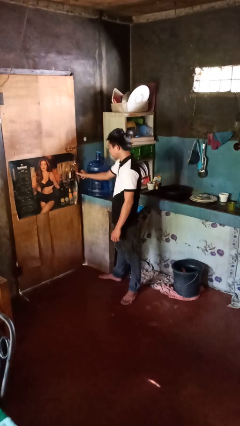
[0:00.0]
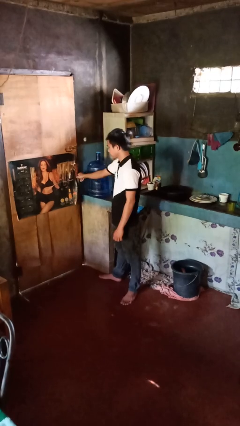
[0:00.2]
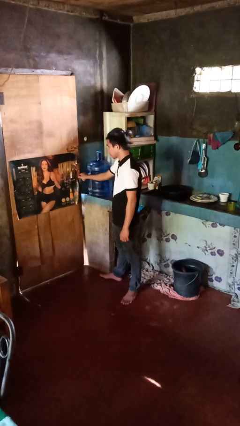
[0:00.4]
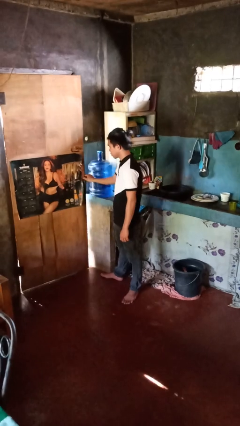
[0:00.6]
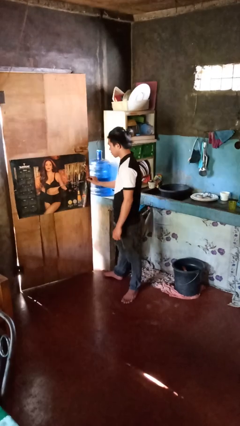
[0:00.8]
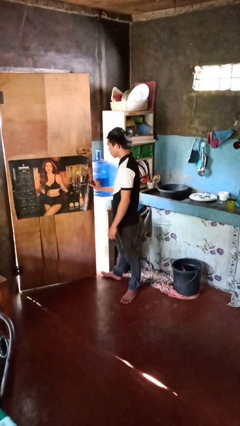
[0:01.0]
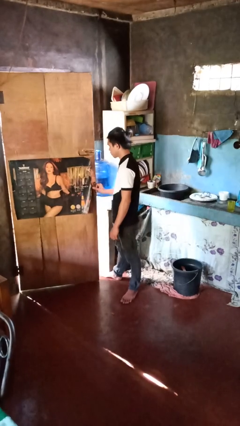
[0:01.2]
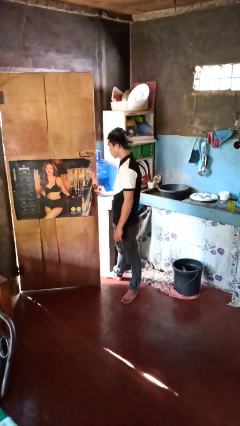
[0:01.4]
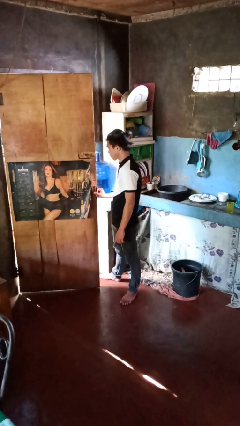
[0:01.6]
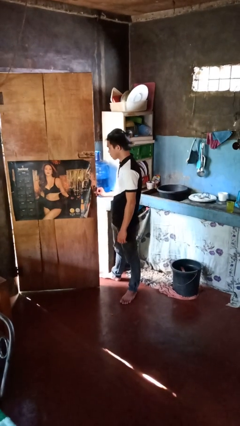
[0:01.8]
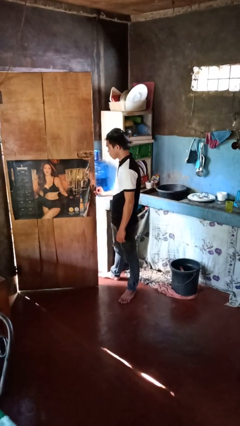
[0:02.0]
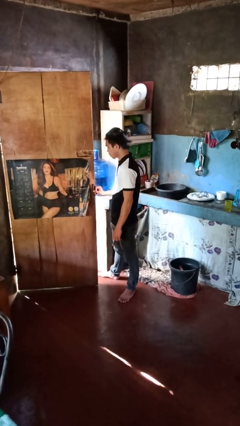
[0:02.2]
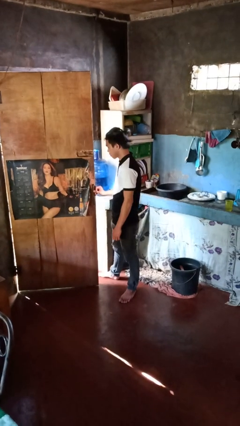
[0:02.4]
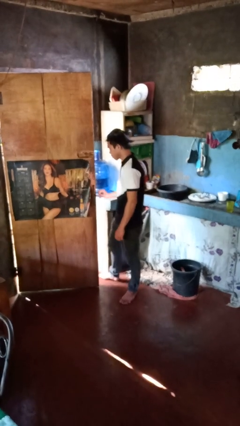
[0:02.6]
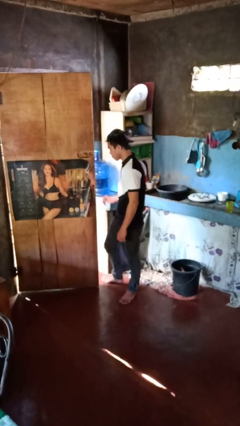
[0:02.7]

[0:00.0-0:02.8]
person opens facility door

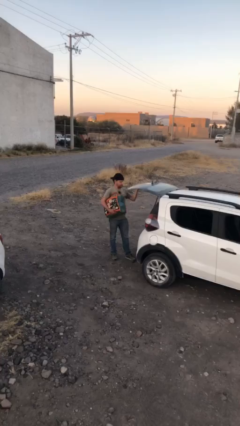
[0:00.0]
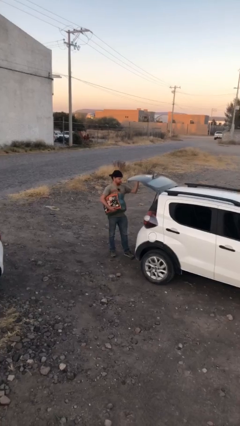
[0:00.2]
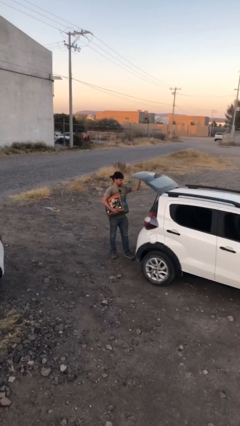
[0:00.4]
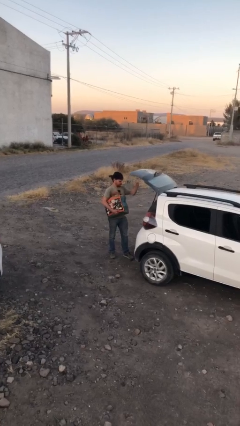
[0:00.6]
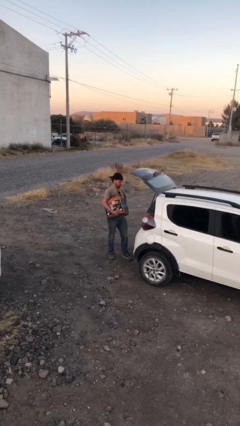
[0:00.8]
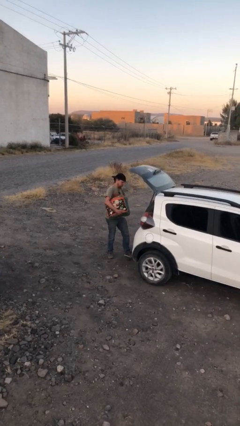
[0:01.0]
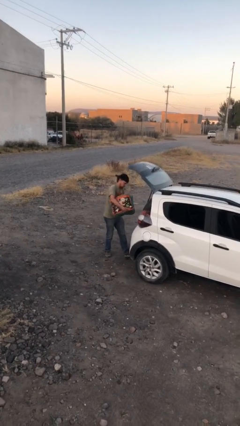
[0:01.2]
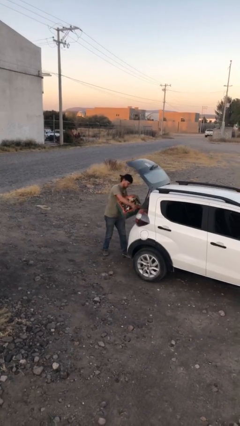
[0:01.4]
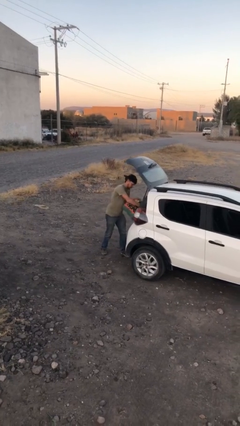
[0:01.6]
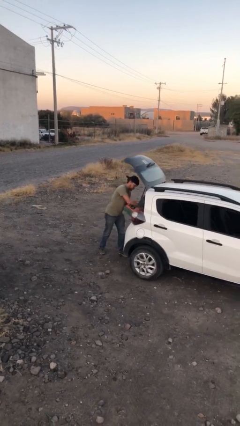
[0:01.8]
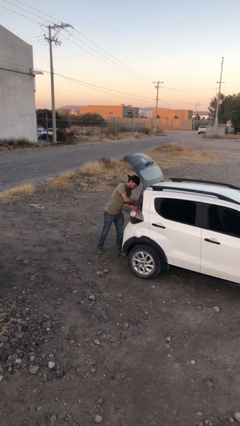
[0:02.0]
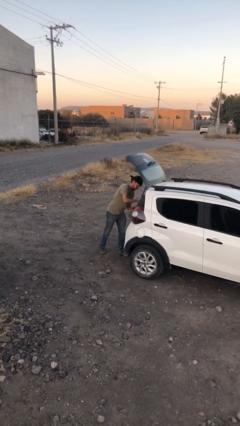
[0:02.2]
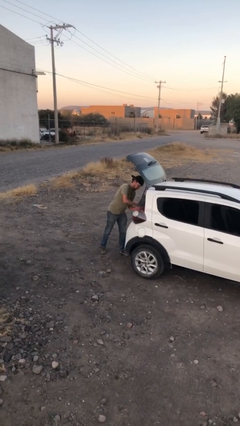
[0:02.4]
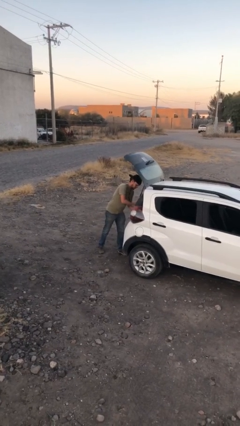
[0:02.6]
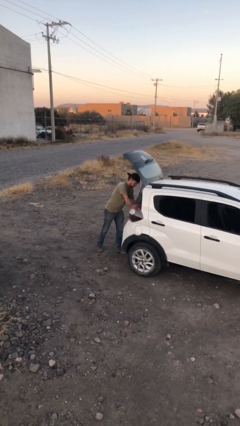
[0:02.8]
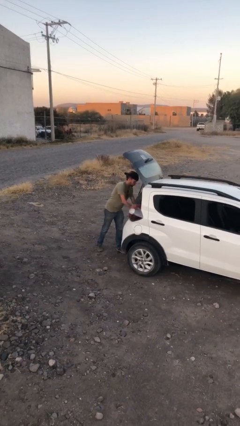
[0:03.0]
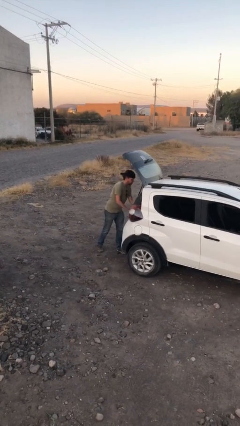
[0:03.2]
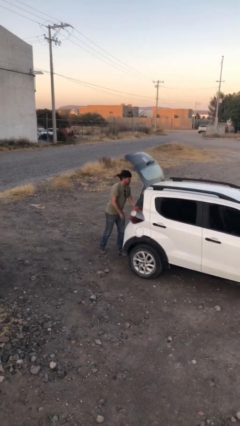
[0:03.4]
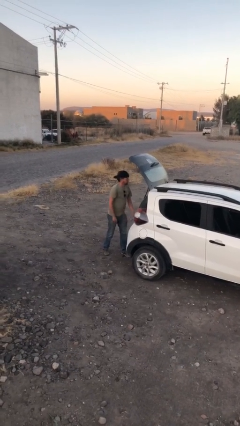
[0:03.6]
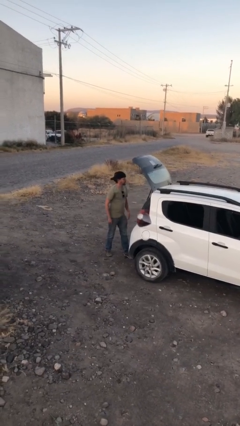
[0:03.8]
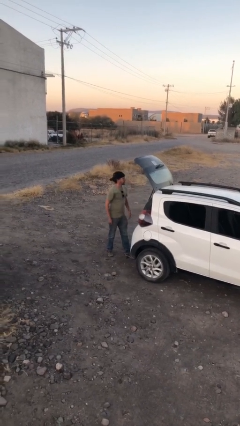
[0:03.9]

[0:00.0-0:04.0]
person loads car

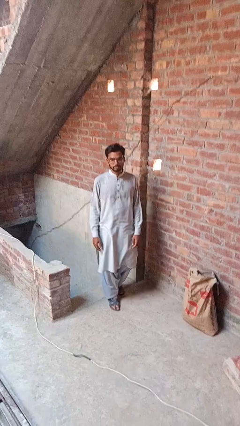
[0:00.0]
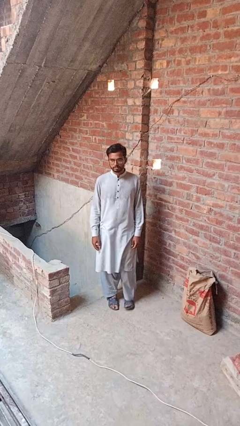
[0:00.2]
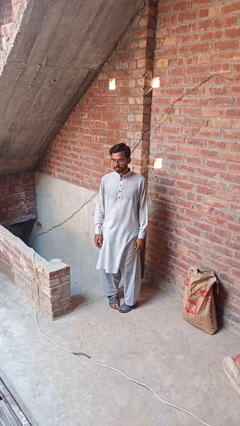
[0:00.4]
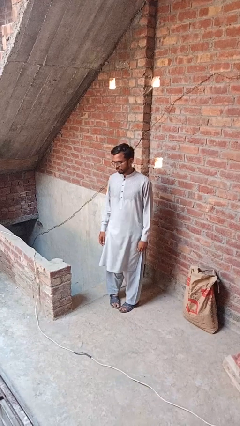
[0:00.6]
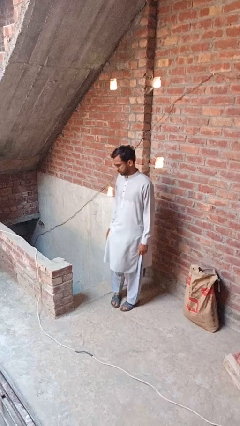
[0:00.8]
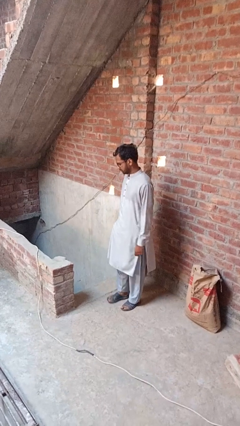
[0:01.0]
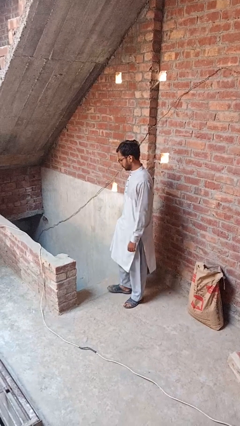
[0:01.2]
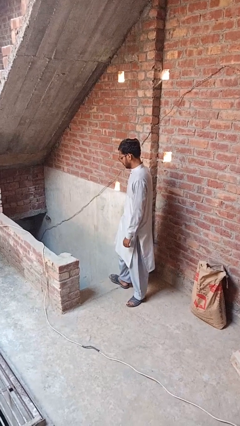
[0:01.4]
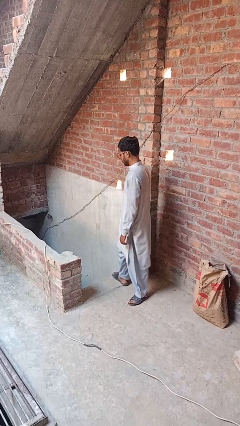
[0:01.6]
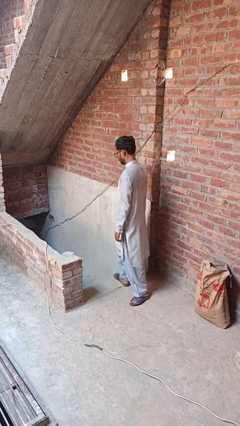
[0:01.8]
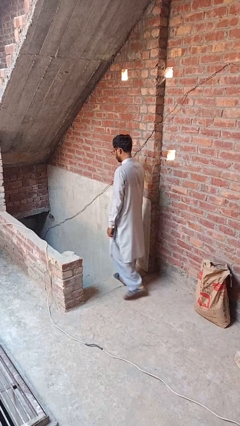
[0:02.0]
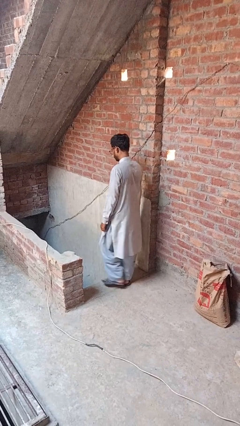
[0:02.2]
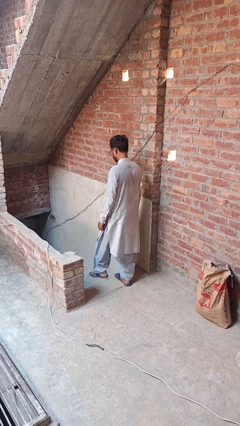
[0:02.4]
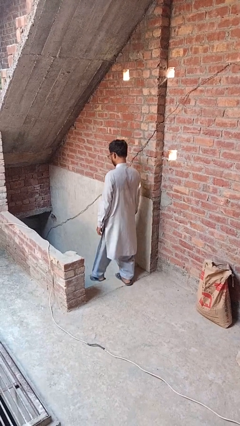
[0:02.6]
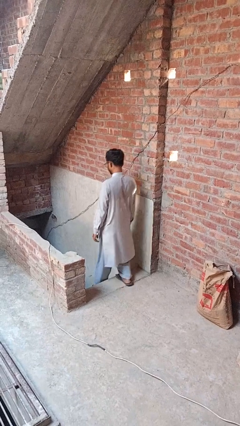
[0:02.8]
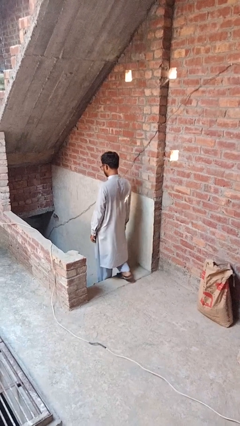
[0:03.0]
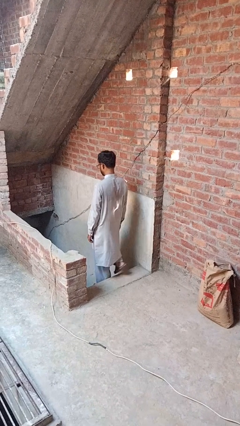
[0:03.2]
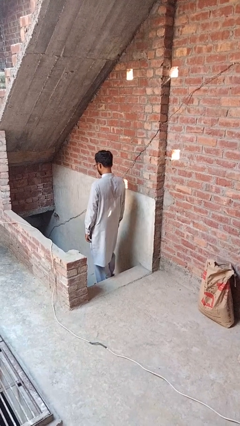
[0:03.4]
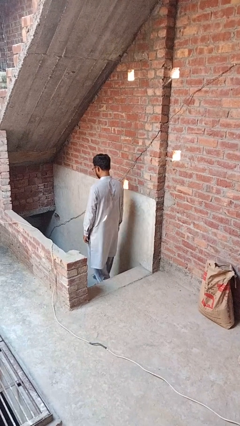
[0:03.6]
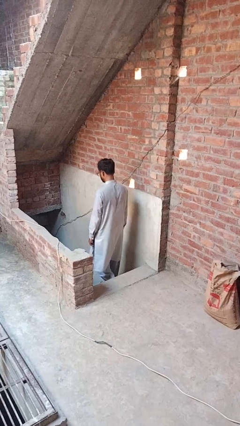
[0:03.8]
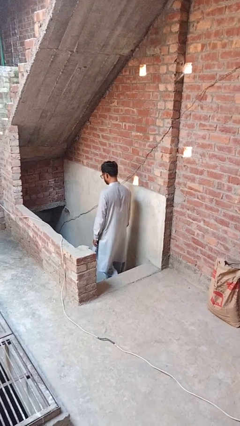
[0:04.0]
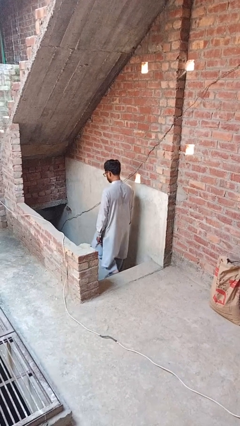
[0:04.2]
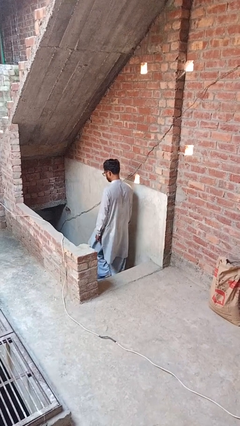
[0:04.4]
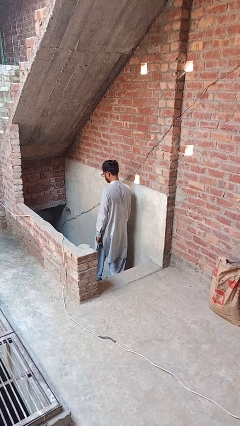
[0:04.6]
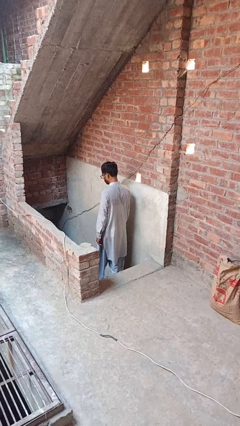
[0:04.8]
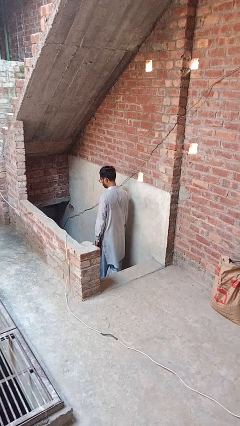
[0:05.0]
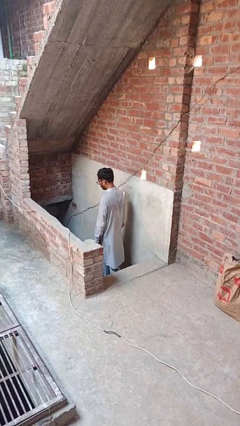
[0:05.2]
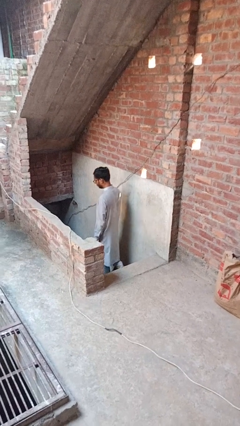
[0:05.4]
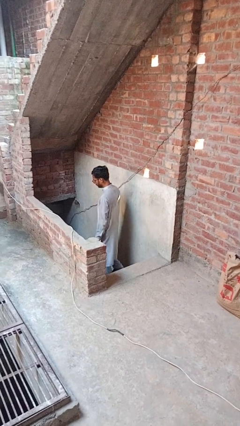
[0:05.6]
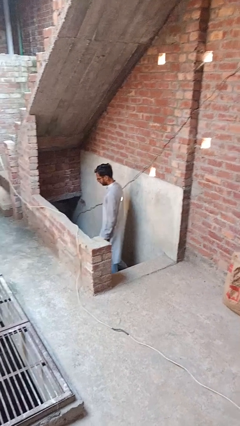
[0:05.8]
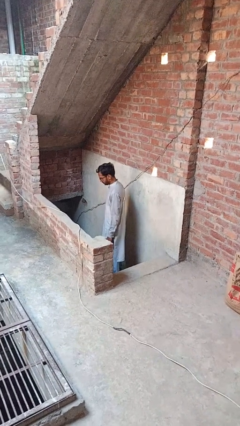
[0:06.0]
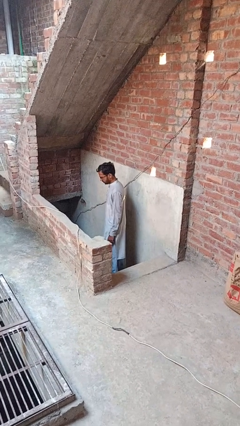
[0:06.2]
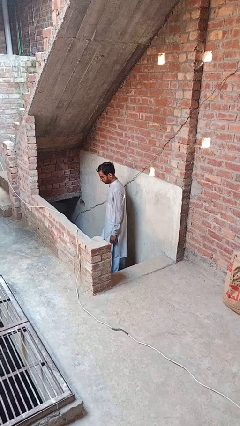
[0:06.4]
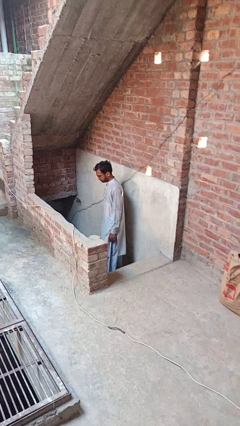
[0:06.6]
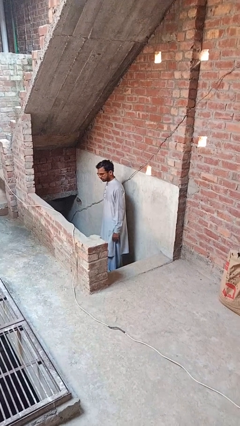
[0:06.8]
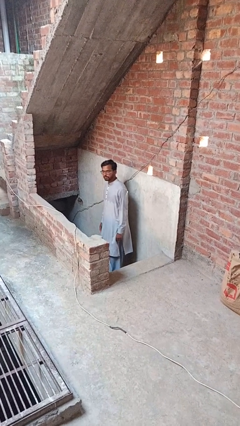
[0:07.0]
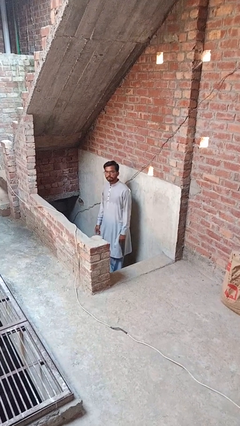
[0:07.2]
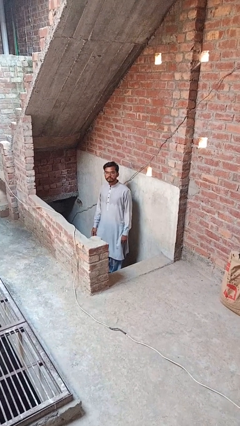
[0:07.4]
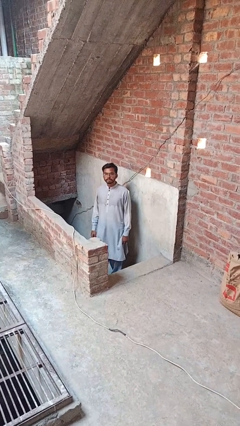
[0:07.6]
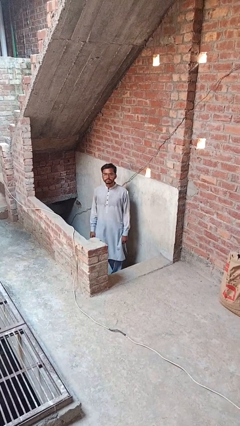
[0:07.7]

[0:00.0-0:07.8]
person climbs down stairs

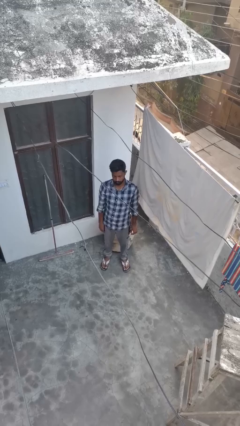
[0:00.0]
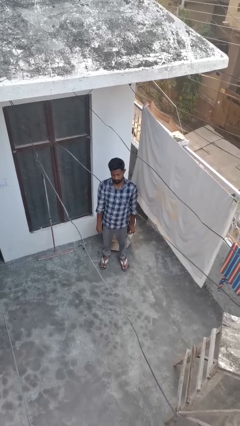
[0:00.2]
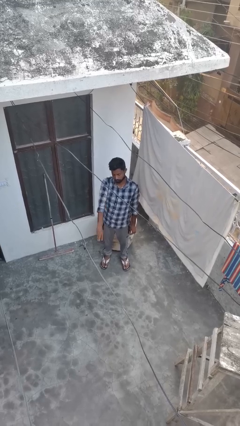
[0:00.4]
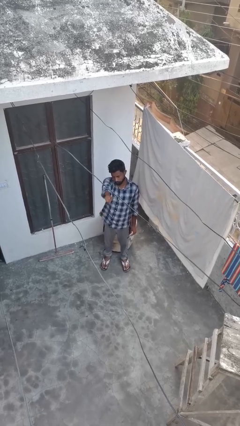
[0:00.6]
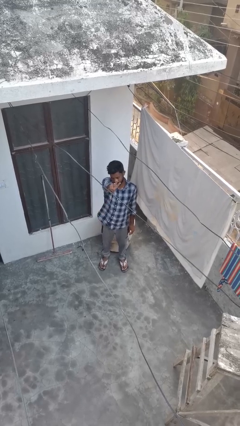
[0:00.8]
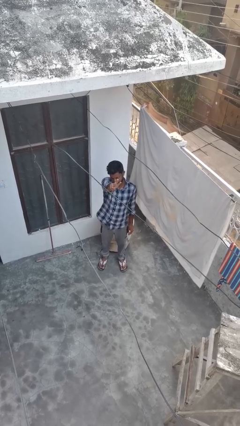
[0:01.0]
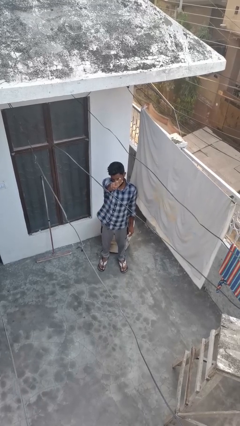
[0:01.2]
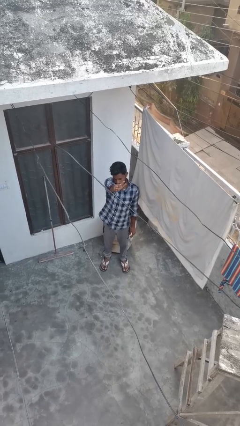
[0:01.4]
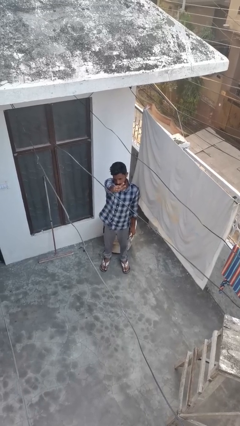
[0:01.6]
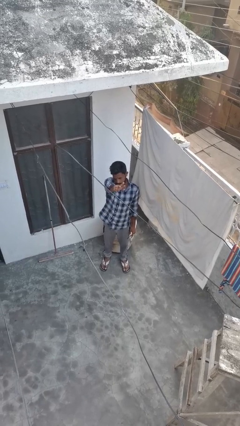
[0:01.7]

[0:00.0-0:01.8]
person gestures number three

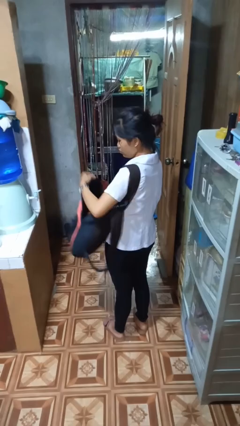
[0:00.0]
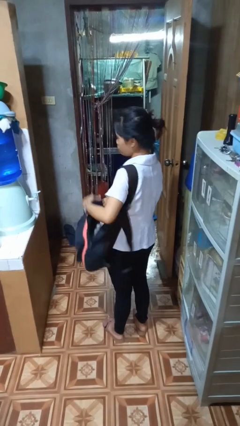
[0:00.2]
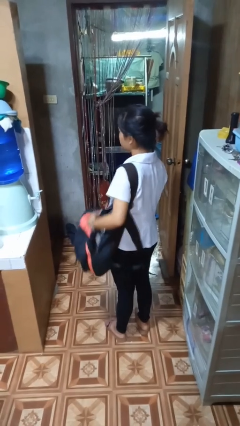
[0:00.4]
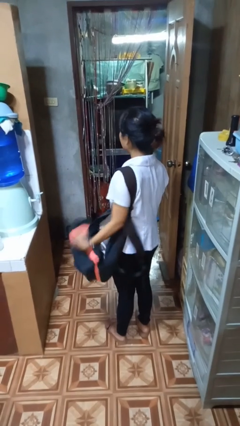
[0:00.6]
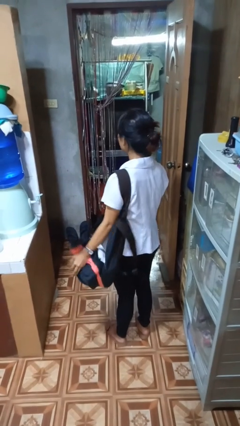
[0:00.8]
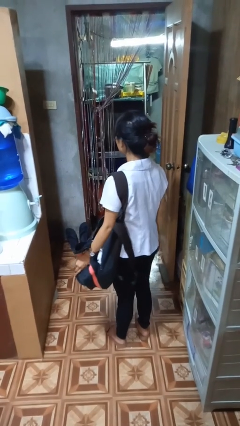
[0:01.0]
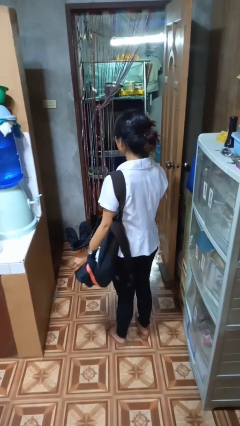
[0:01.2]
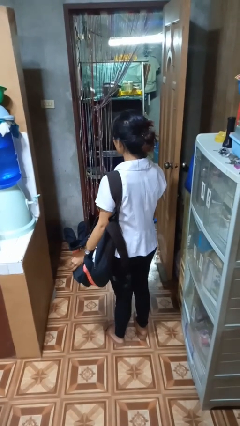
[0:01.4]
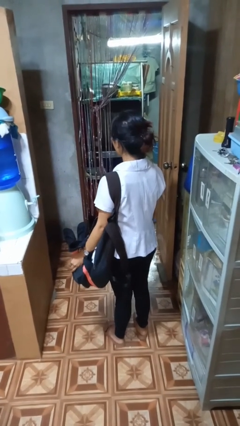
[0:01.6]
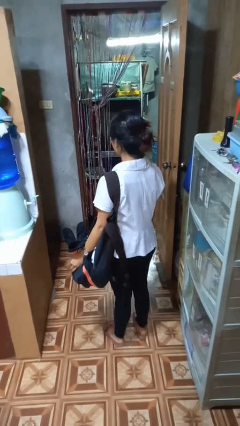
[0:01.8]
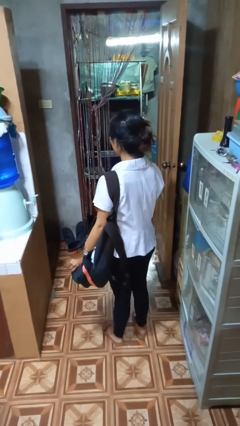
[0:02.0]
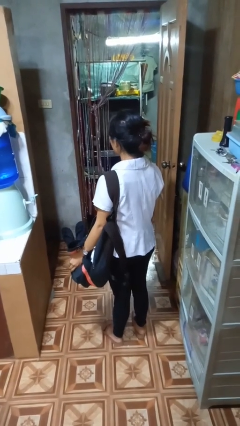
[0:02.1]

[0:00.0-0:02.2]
person puts object into backpack
